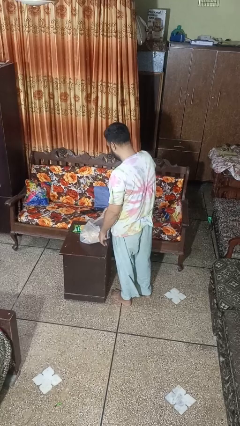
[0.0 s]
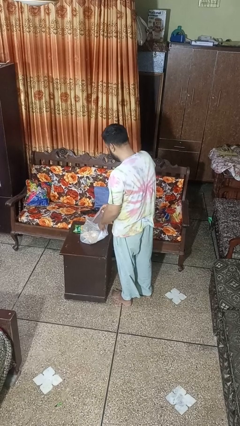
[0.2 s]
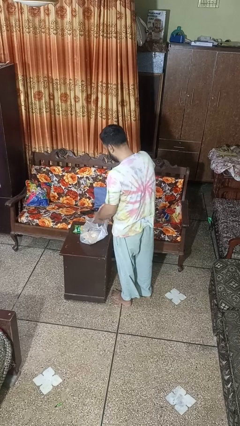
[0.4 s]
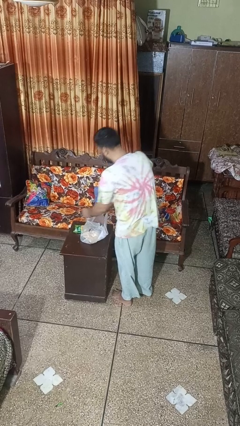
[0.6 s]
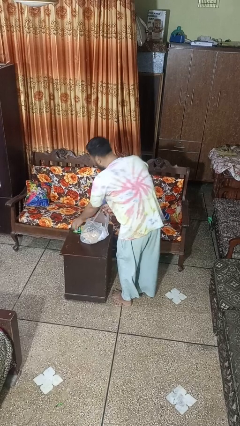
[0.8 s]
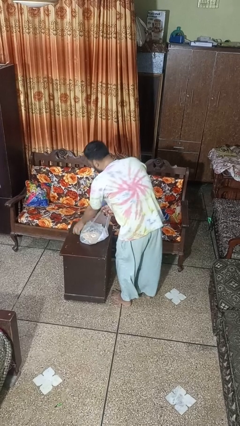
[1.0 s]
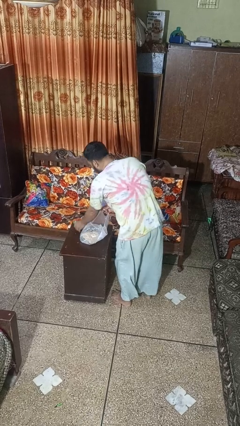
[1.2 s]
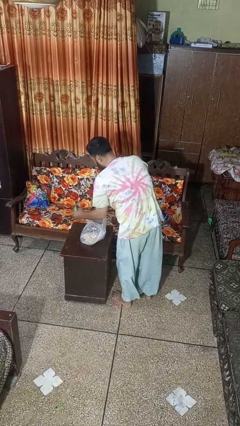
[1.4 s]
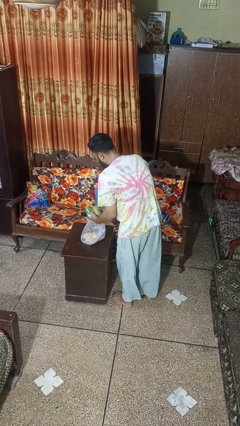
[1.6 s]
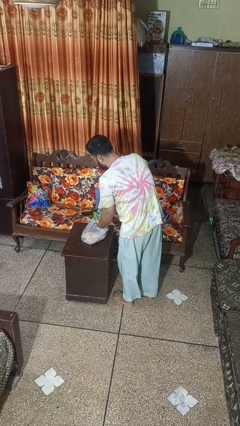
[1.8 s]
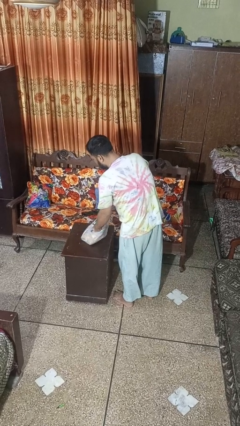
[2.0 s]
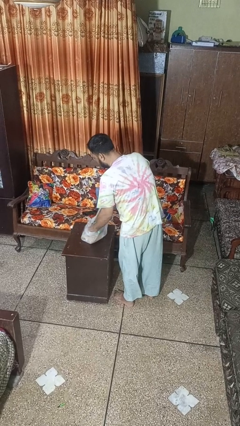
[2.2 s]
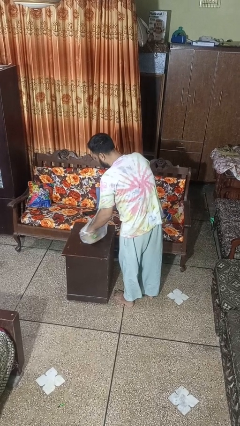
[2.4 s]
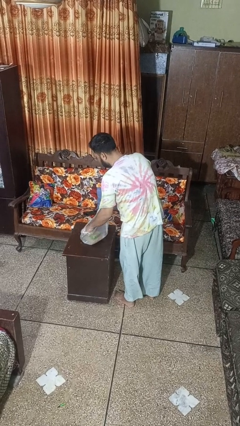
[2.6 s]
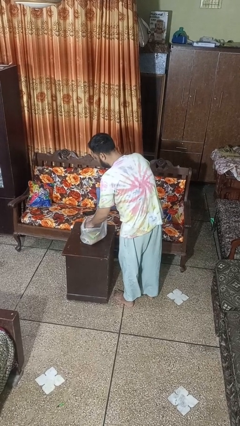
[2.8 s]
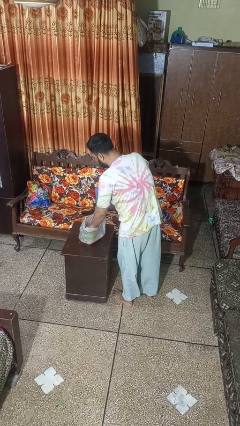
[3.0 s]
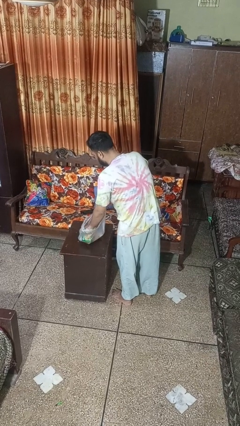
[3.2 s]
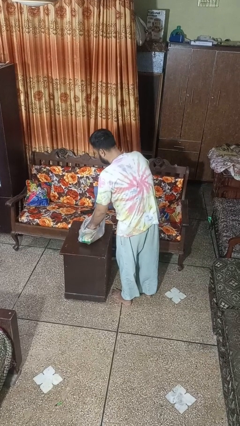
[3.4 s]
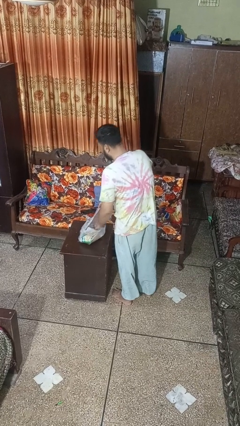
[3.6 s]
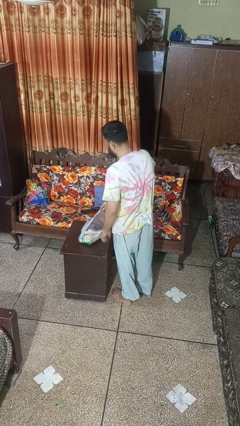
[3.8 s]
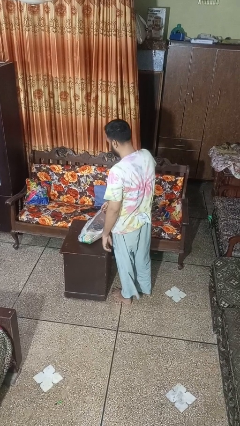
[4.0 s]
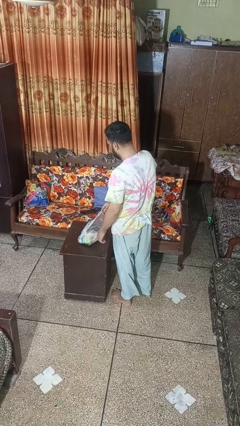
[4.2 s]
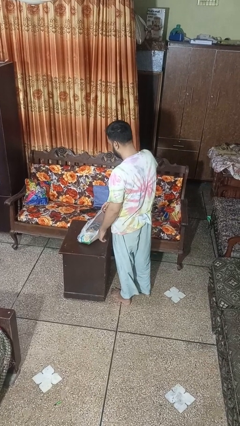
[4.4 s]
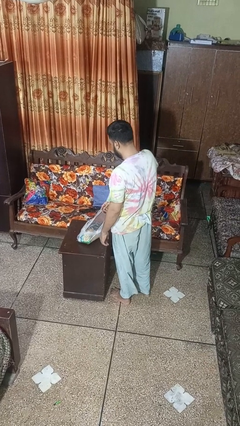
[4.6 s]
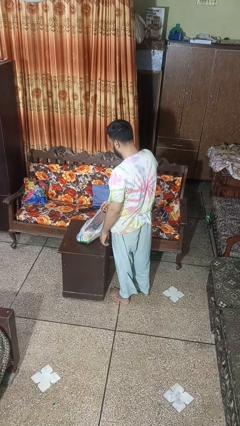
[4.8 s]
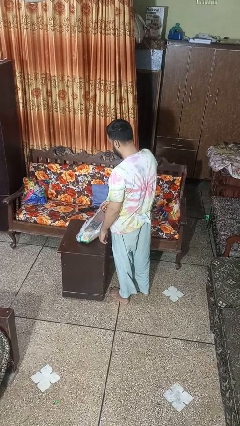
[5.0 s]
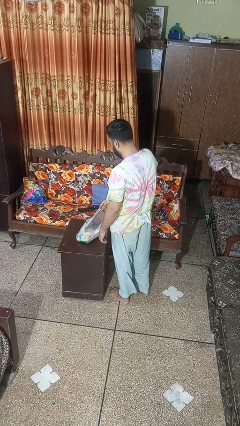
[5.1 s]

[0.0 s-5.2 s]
person puts object into bag

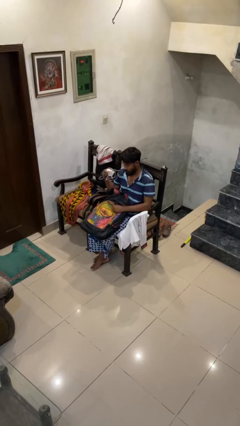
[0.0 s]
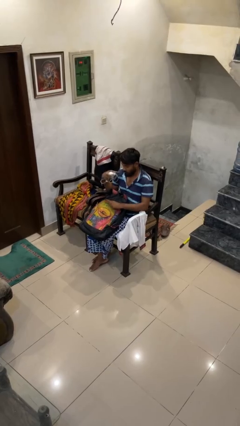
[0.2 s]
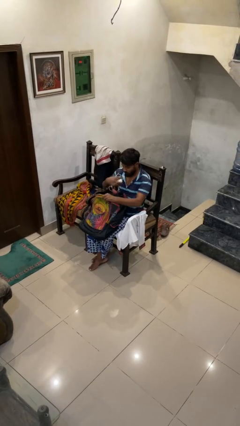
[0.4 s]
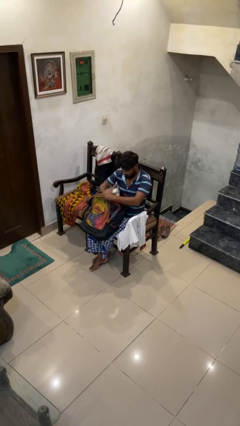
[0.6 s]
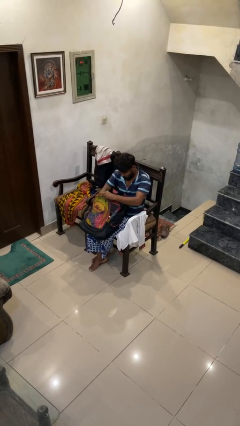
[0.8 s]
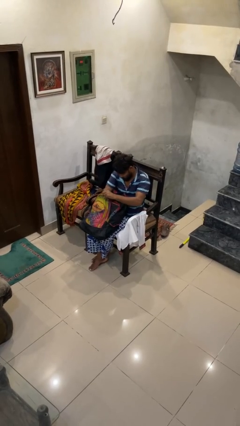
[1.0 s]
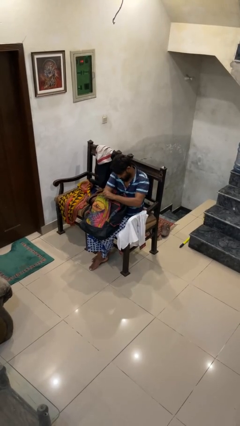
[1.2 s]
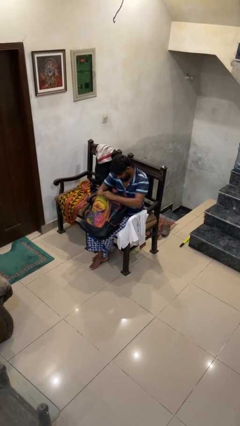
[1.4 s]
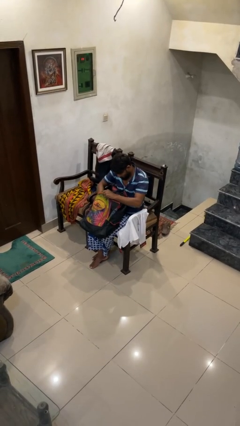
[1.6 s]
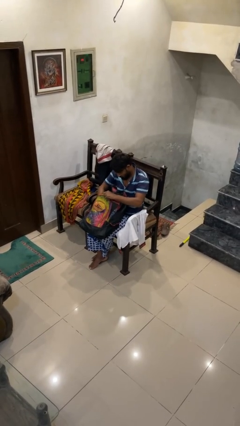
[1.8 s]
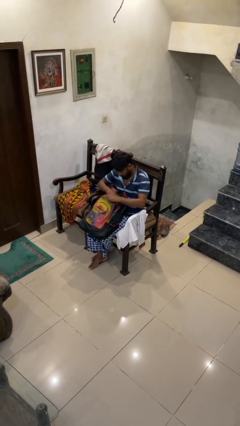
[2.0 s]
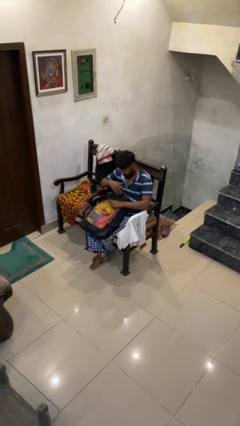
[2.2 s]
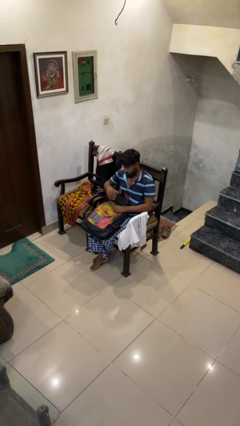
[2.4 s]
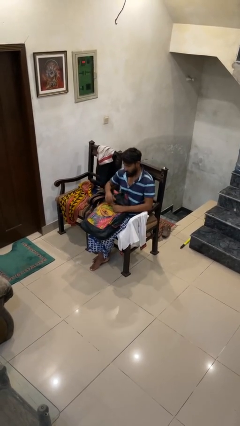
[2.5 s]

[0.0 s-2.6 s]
person puts object into backpack

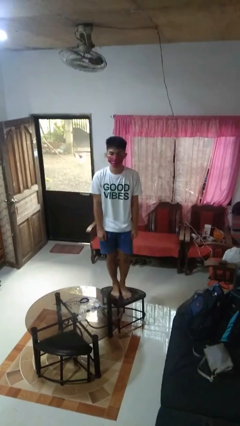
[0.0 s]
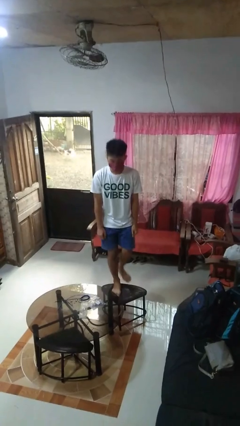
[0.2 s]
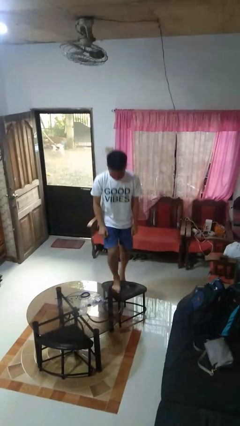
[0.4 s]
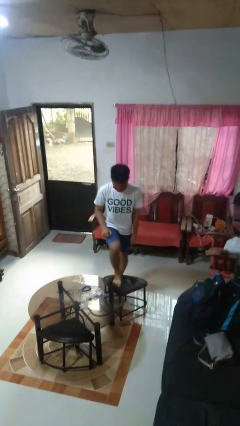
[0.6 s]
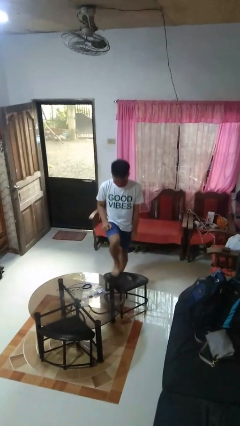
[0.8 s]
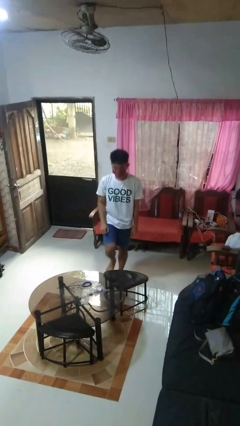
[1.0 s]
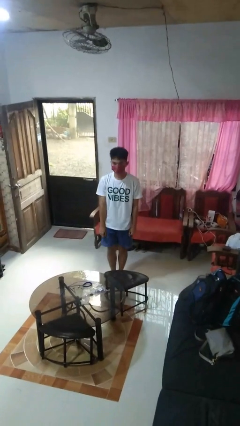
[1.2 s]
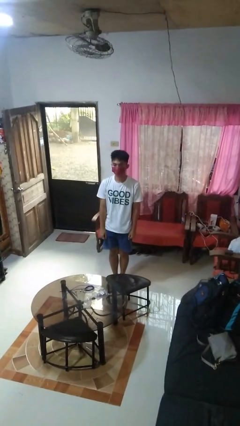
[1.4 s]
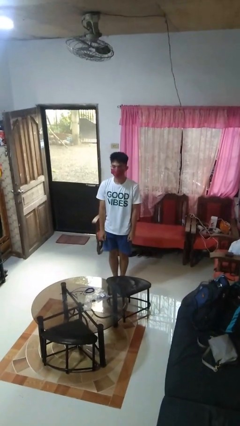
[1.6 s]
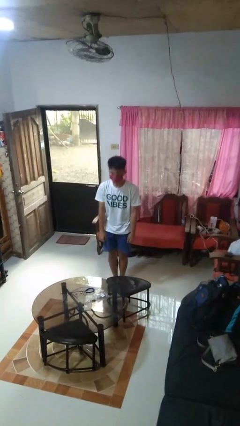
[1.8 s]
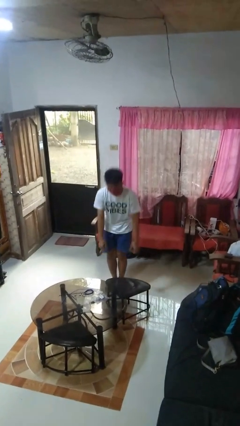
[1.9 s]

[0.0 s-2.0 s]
person climbs off chair

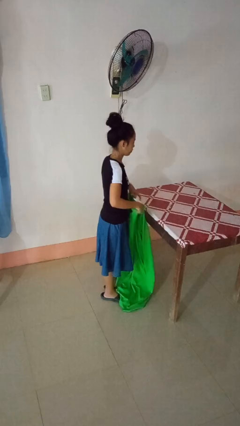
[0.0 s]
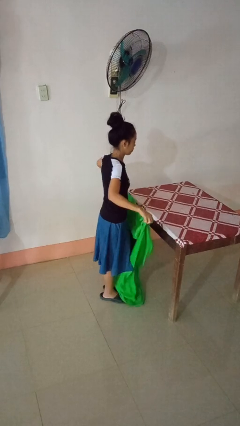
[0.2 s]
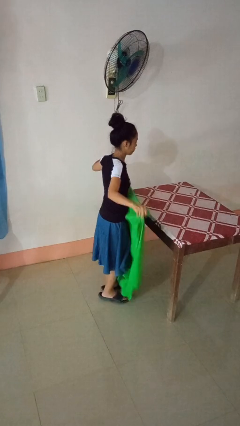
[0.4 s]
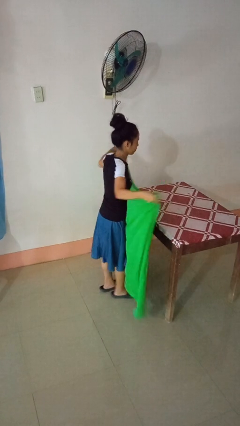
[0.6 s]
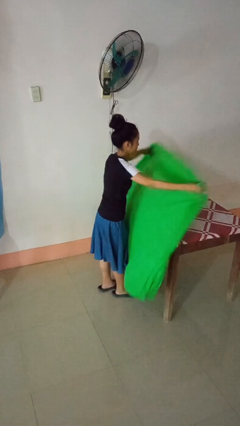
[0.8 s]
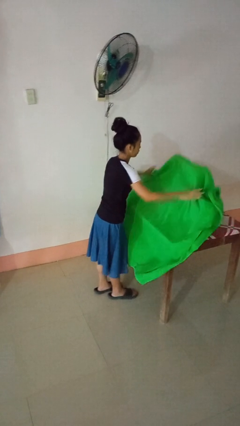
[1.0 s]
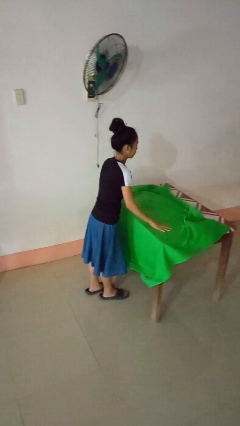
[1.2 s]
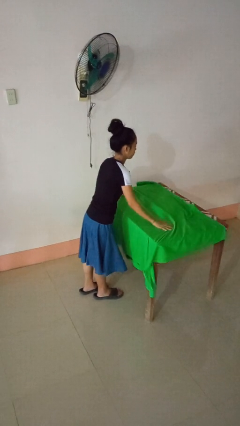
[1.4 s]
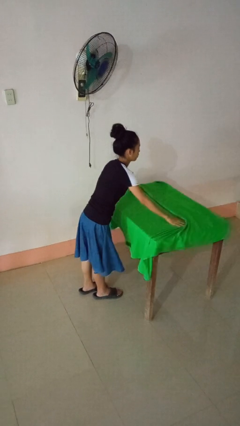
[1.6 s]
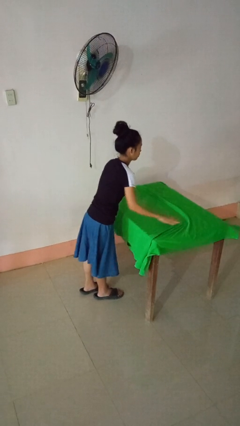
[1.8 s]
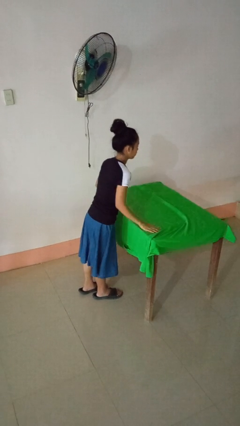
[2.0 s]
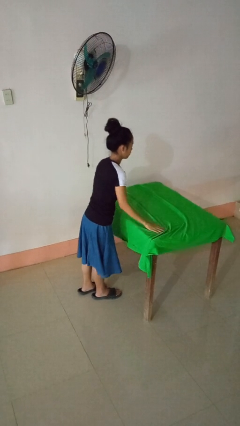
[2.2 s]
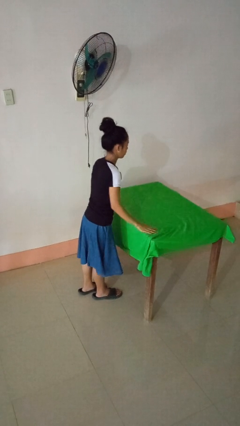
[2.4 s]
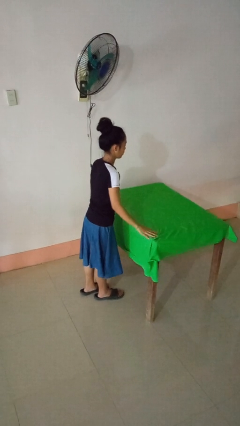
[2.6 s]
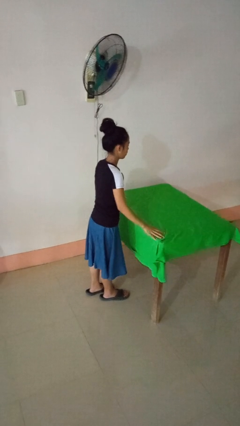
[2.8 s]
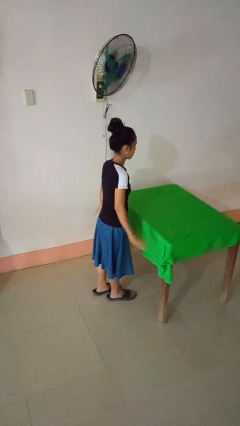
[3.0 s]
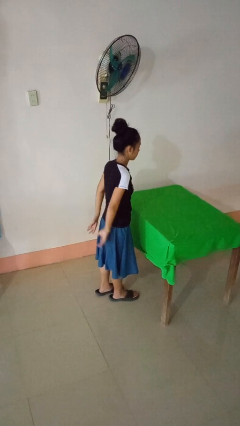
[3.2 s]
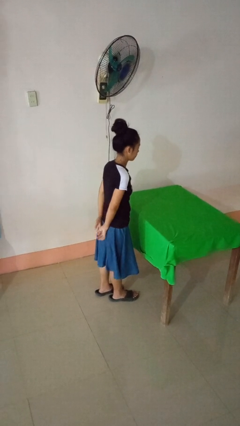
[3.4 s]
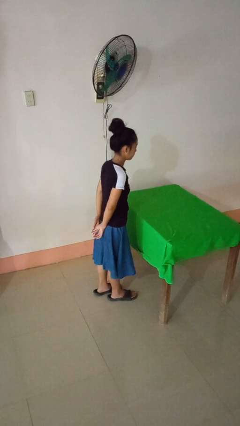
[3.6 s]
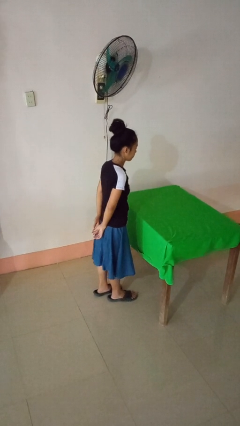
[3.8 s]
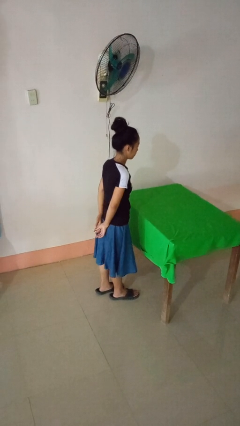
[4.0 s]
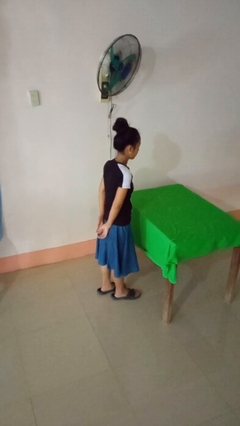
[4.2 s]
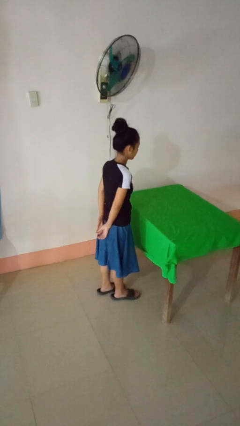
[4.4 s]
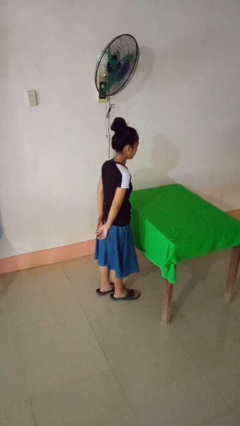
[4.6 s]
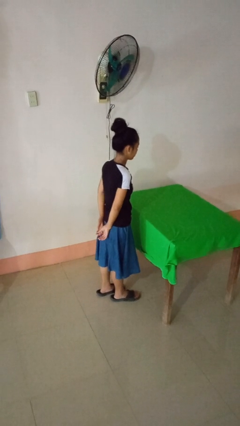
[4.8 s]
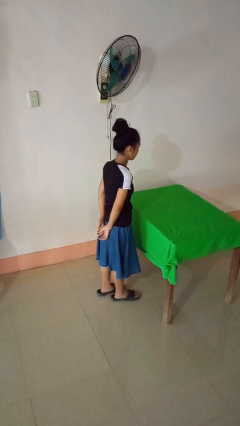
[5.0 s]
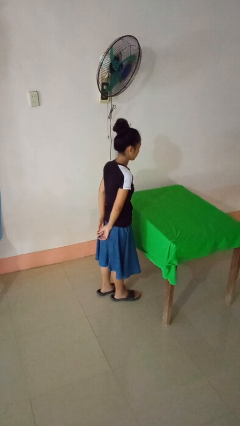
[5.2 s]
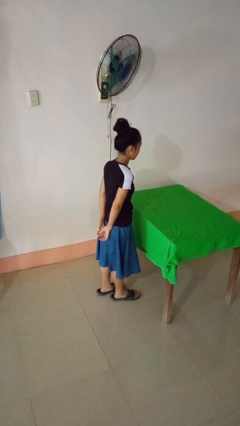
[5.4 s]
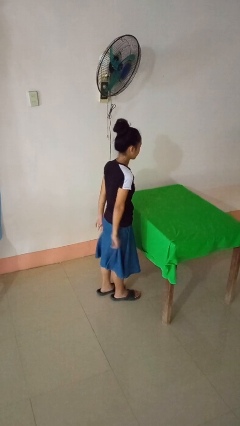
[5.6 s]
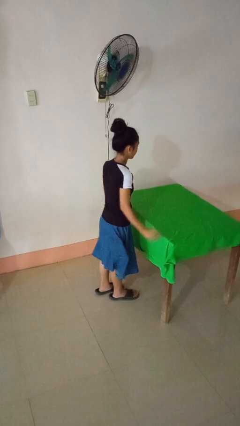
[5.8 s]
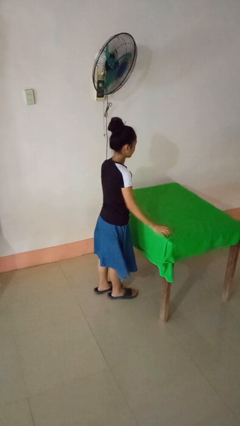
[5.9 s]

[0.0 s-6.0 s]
person spreads tablecloth

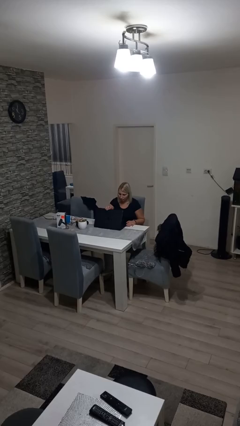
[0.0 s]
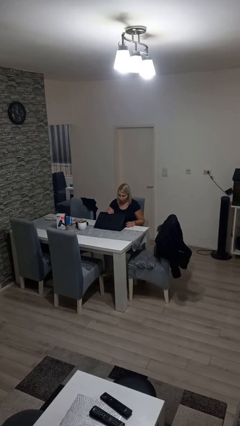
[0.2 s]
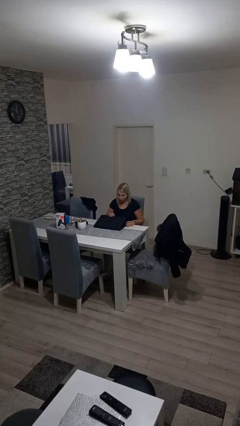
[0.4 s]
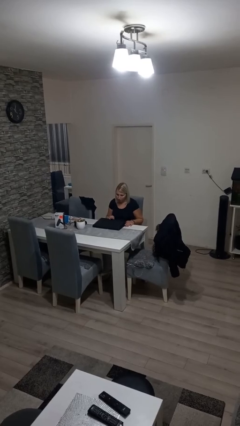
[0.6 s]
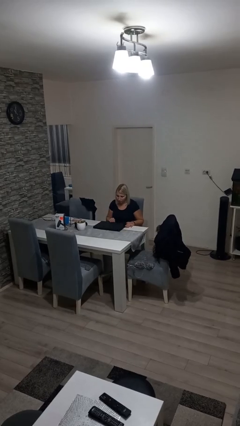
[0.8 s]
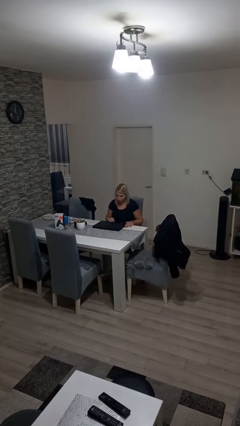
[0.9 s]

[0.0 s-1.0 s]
person closes laptop

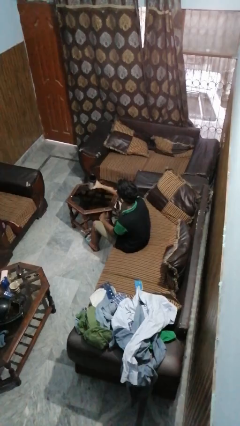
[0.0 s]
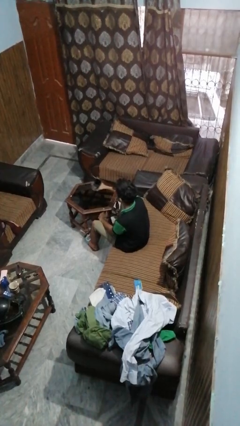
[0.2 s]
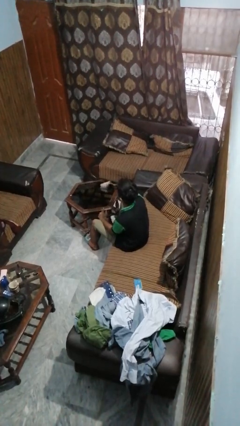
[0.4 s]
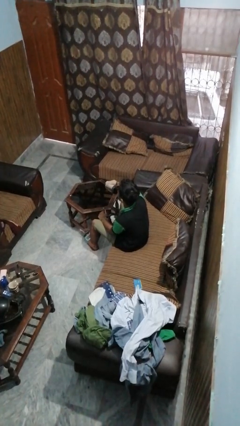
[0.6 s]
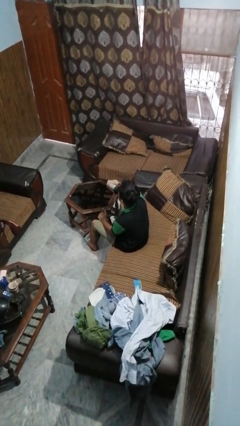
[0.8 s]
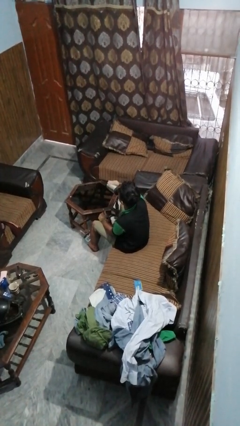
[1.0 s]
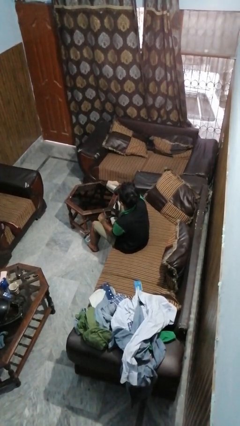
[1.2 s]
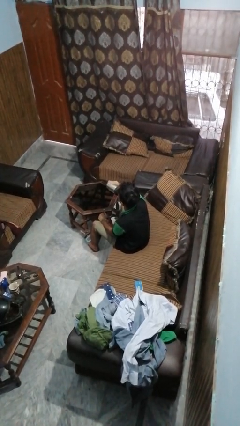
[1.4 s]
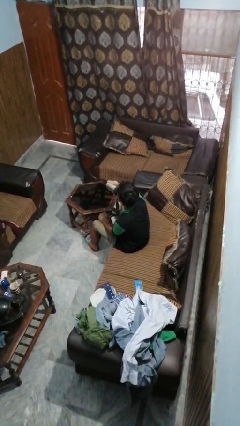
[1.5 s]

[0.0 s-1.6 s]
person drinks from mug
